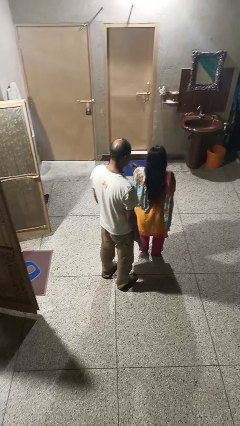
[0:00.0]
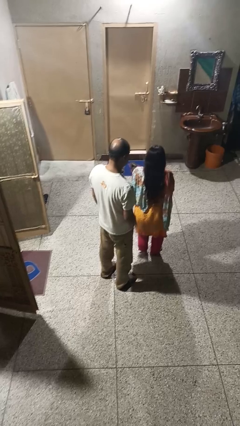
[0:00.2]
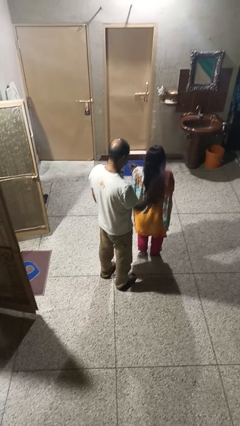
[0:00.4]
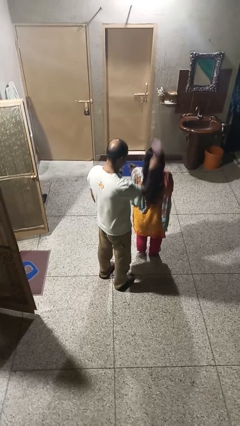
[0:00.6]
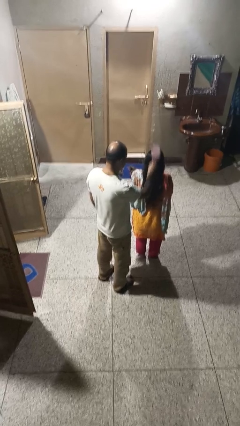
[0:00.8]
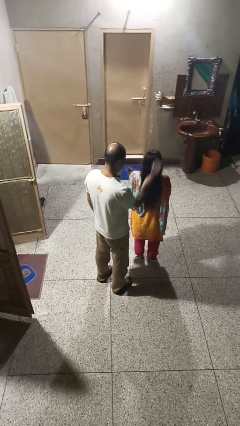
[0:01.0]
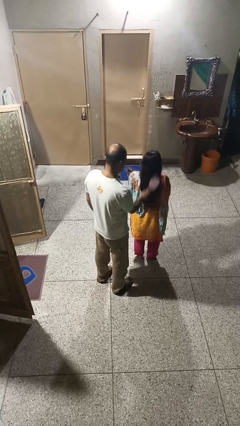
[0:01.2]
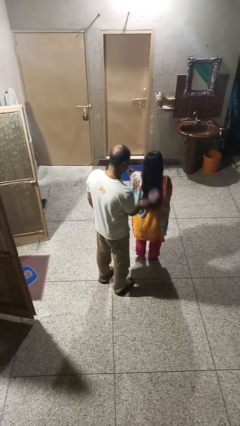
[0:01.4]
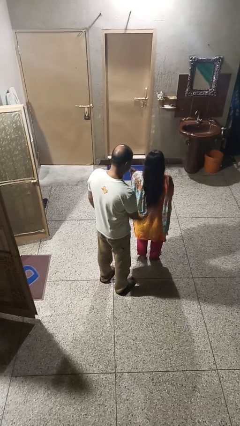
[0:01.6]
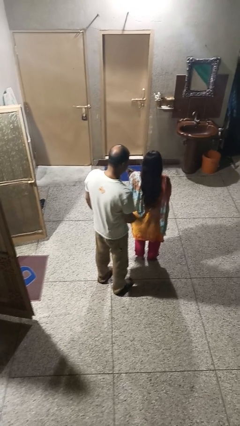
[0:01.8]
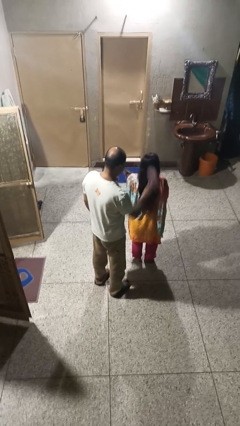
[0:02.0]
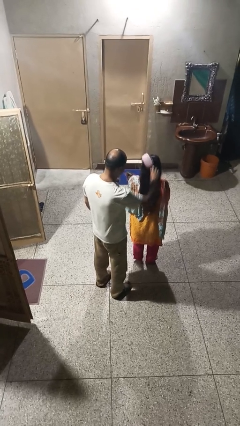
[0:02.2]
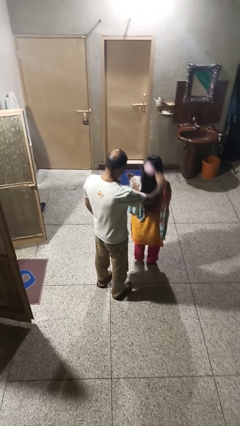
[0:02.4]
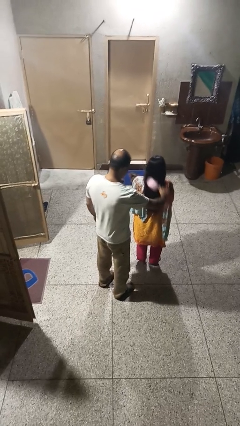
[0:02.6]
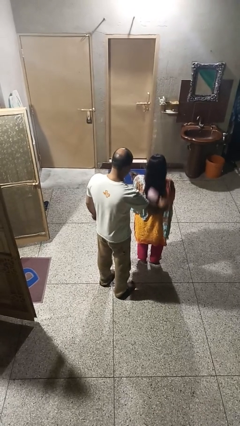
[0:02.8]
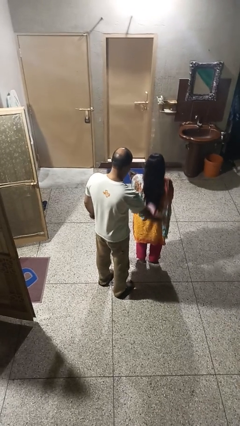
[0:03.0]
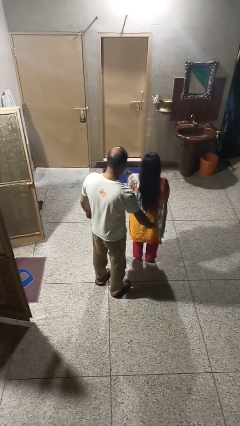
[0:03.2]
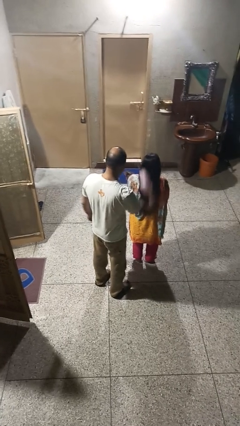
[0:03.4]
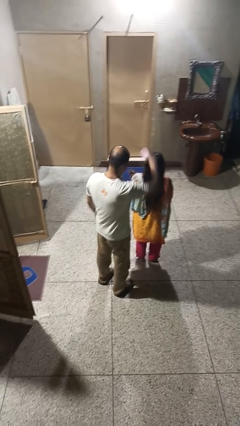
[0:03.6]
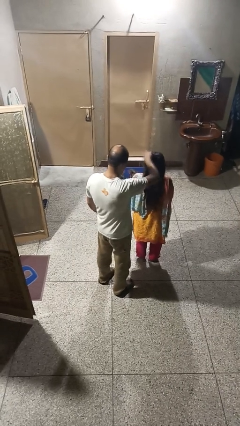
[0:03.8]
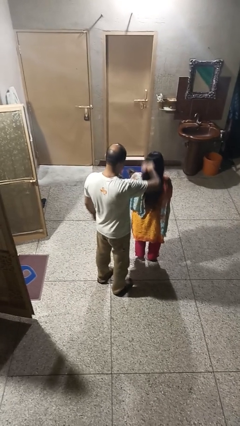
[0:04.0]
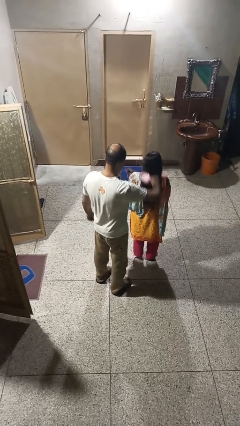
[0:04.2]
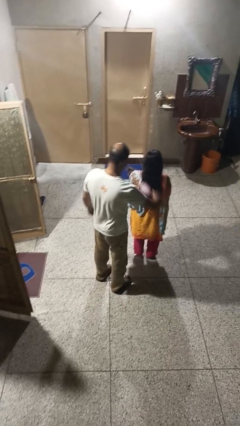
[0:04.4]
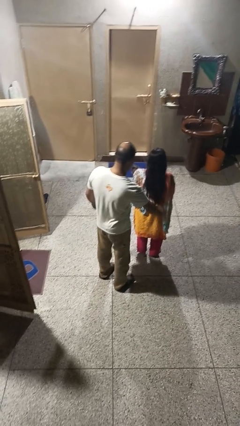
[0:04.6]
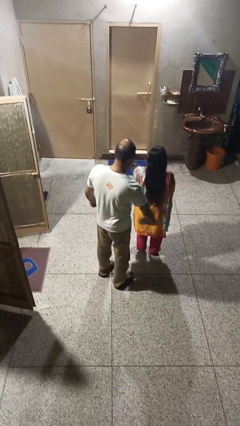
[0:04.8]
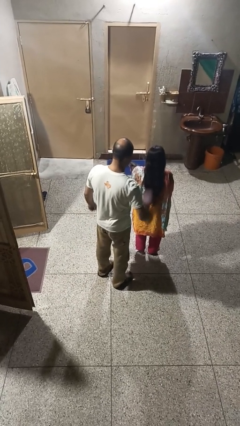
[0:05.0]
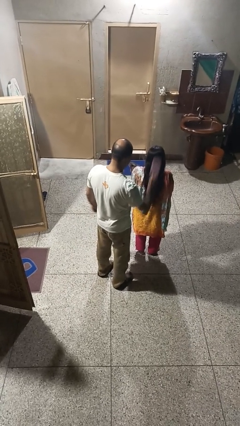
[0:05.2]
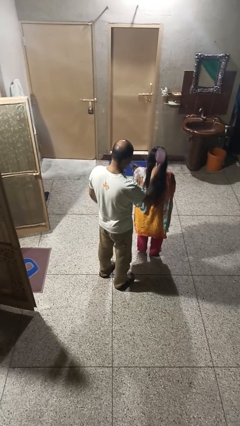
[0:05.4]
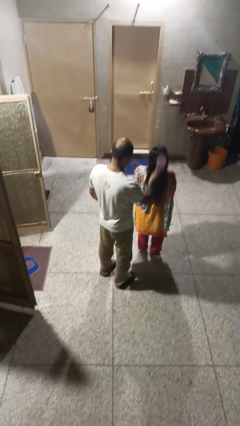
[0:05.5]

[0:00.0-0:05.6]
person brushes hair of person

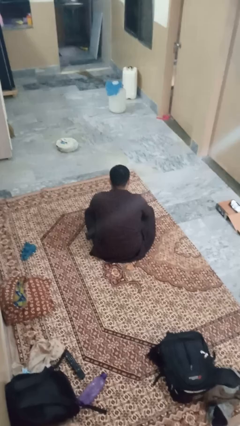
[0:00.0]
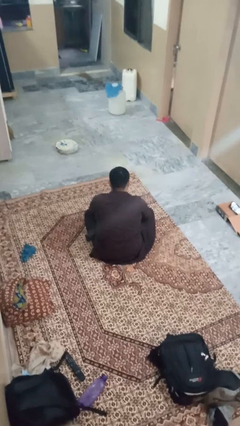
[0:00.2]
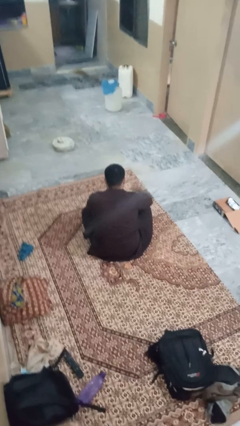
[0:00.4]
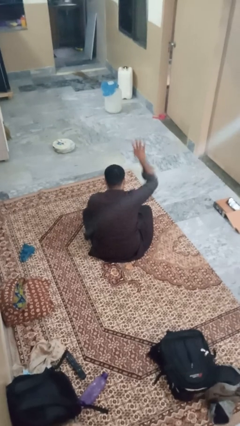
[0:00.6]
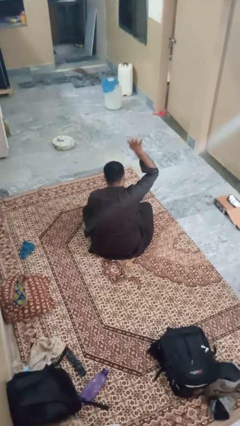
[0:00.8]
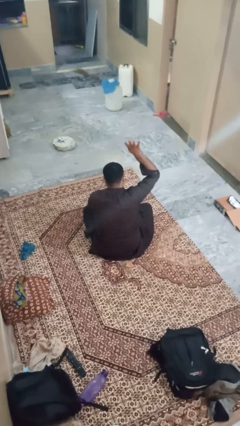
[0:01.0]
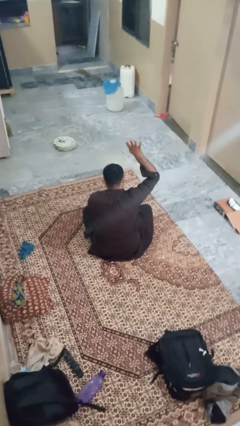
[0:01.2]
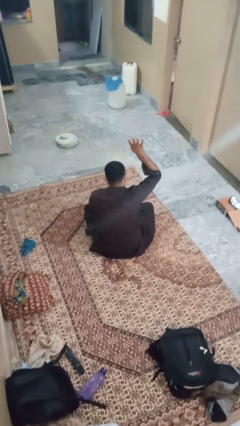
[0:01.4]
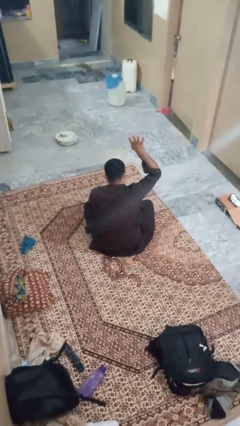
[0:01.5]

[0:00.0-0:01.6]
person gestures number four

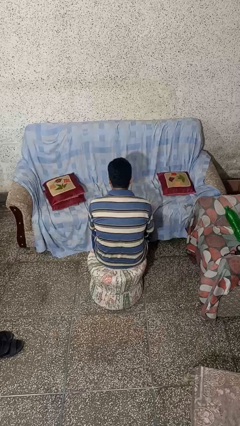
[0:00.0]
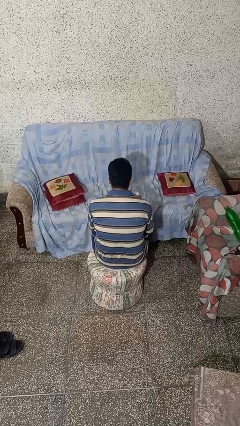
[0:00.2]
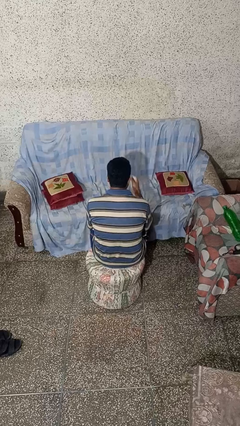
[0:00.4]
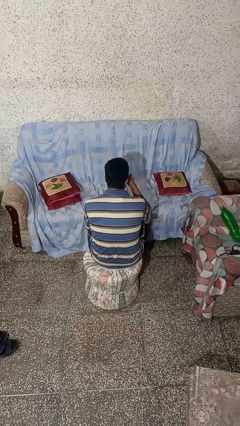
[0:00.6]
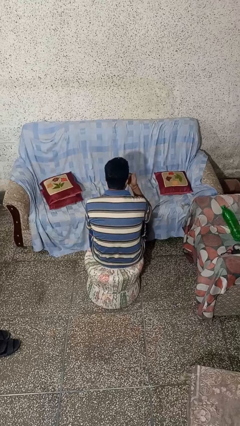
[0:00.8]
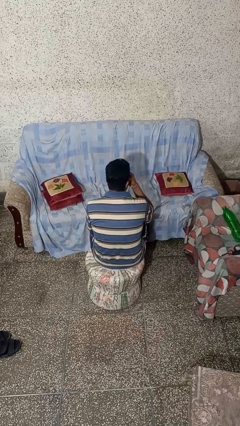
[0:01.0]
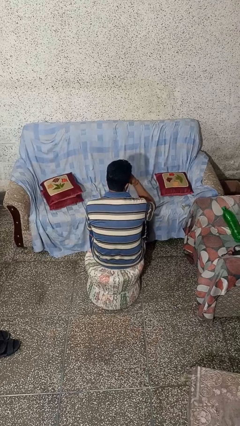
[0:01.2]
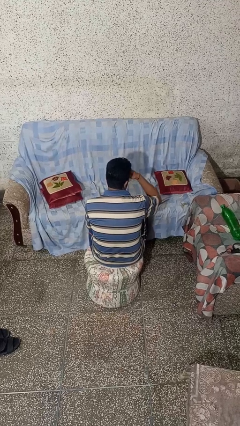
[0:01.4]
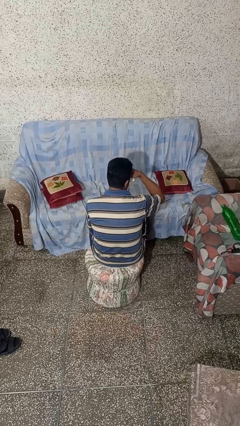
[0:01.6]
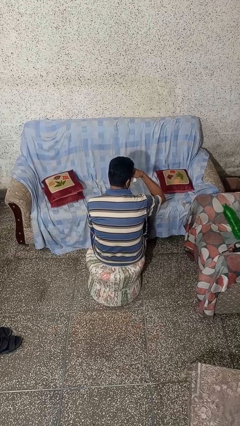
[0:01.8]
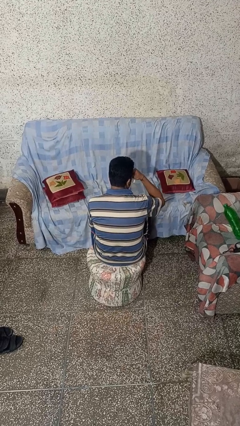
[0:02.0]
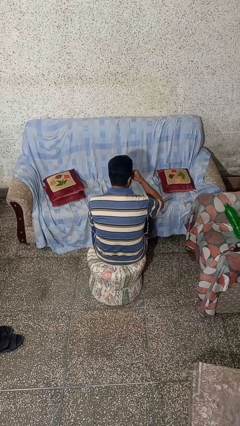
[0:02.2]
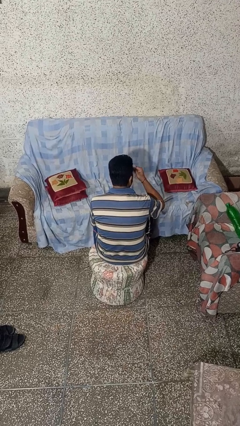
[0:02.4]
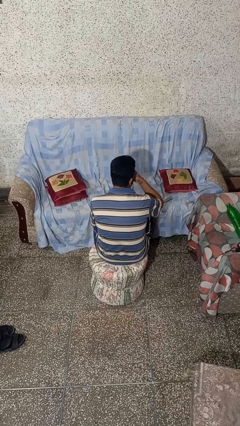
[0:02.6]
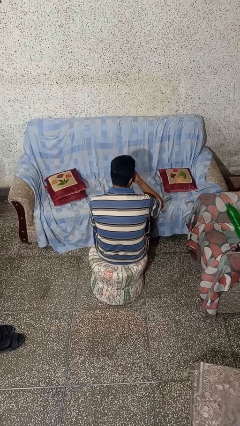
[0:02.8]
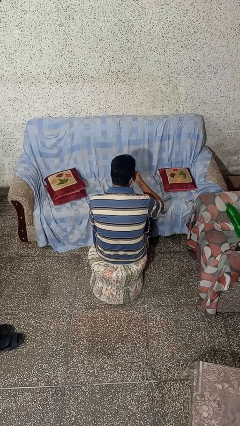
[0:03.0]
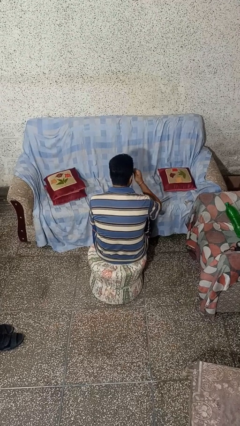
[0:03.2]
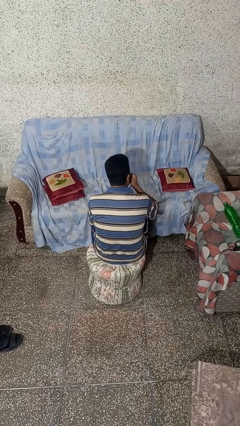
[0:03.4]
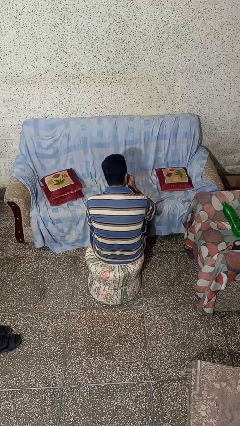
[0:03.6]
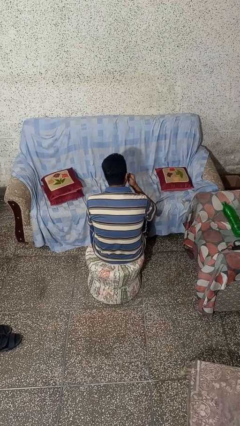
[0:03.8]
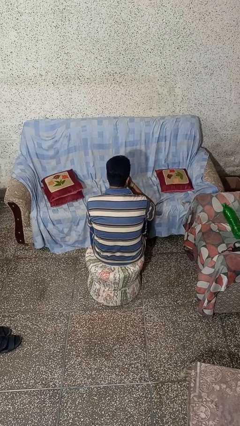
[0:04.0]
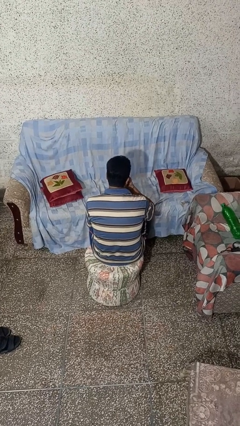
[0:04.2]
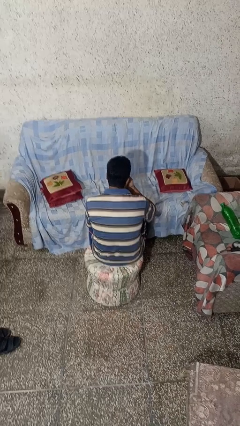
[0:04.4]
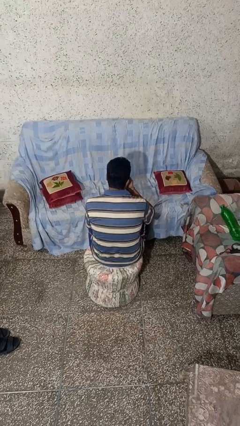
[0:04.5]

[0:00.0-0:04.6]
person blows nose

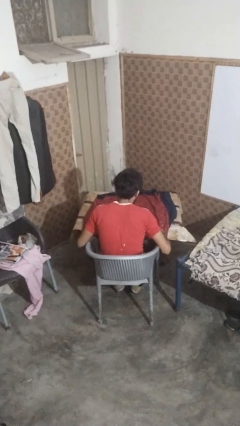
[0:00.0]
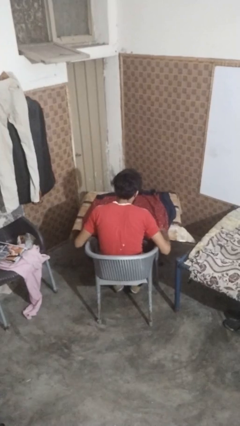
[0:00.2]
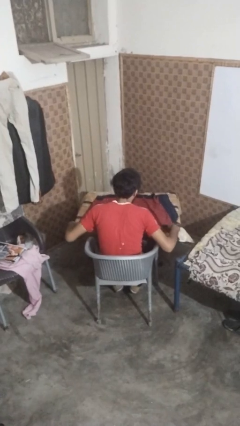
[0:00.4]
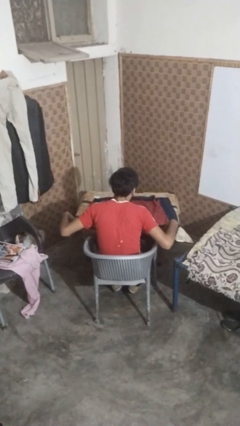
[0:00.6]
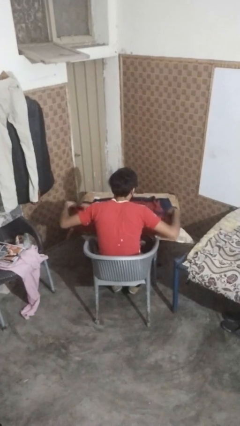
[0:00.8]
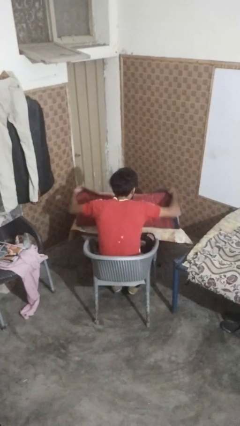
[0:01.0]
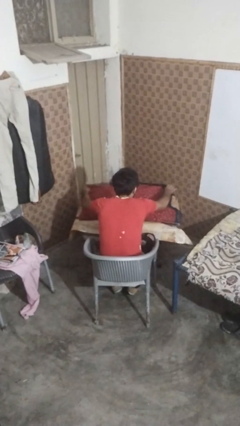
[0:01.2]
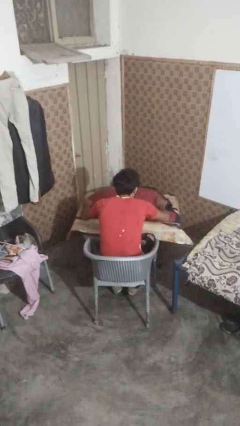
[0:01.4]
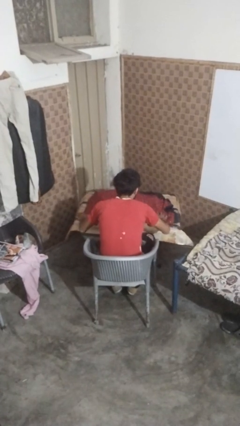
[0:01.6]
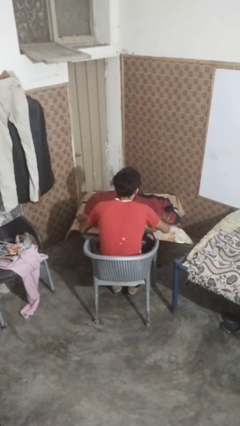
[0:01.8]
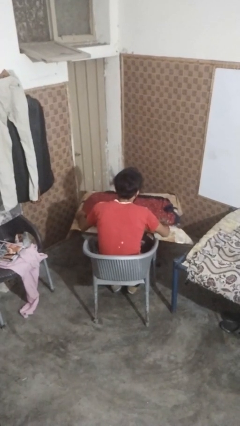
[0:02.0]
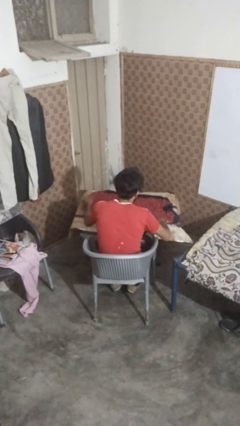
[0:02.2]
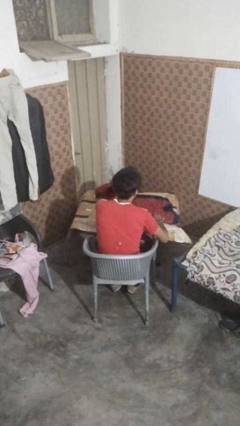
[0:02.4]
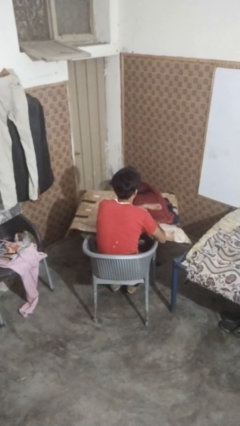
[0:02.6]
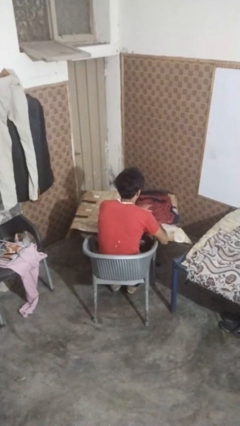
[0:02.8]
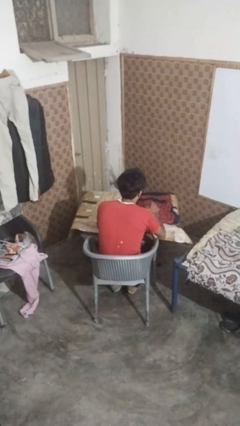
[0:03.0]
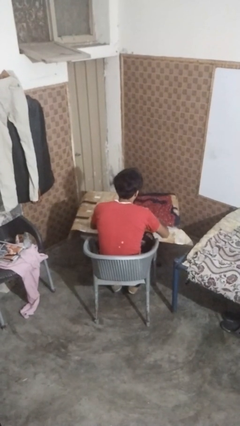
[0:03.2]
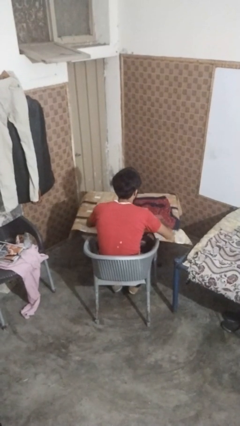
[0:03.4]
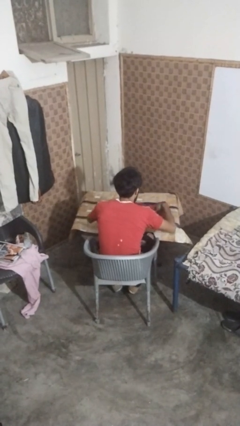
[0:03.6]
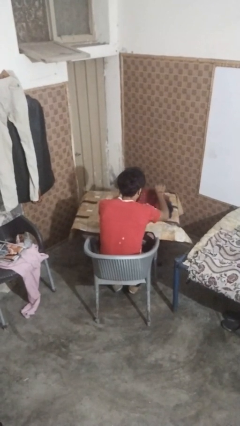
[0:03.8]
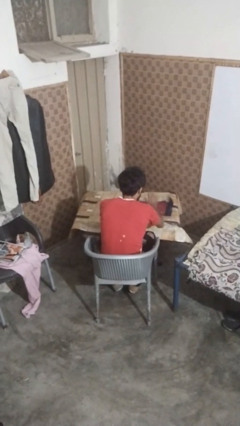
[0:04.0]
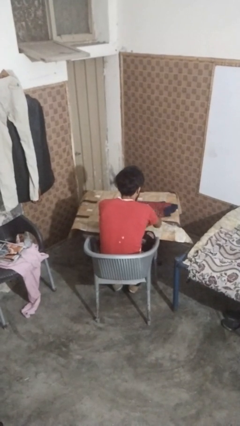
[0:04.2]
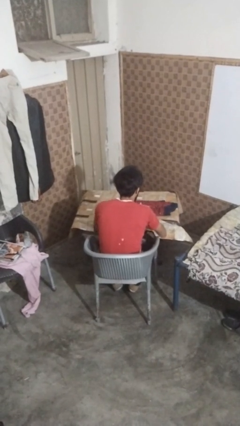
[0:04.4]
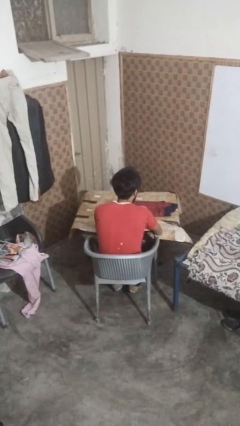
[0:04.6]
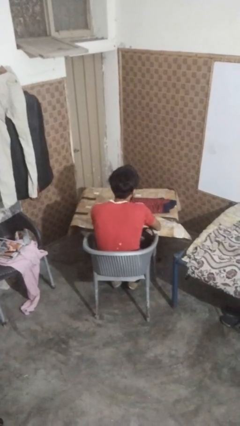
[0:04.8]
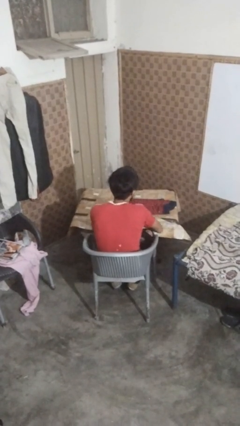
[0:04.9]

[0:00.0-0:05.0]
person folds tablecloth

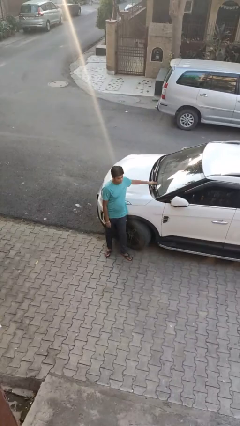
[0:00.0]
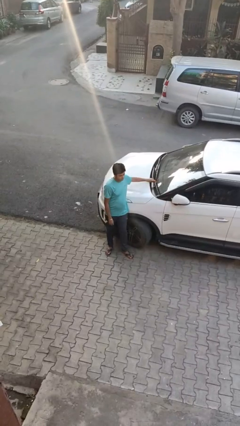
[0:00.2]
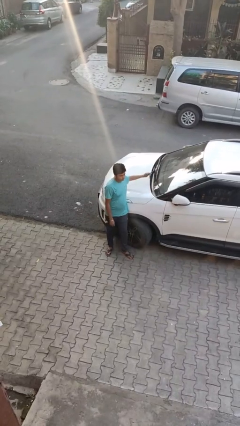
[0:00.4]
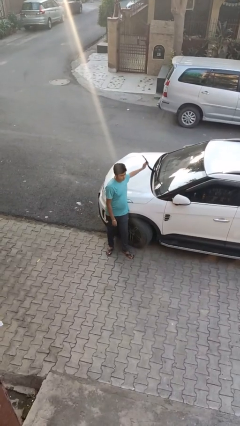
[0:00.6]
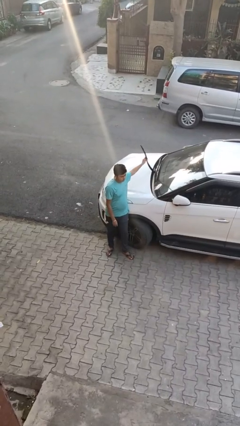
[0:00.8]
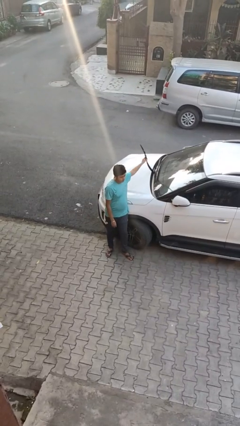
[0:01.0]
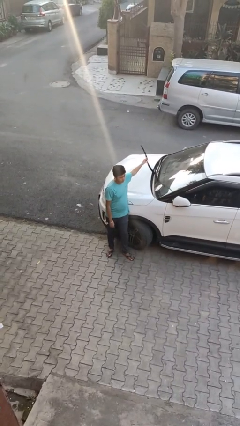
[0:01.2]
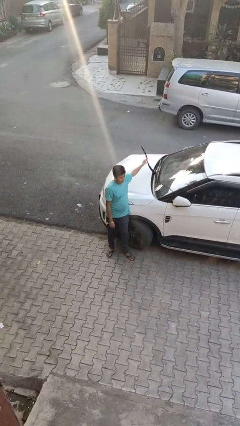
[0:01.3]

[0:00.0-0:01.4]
person flips up car wipers
